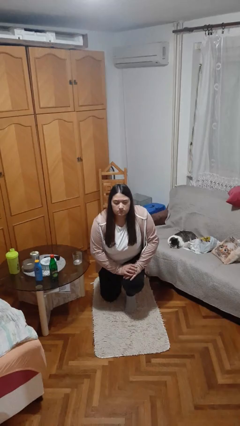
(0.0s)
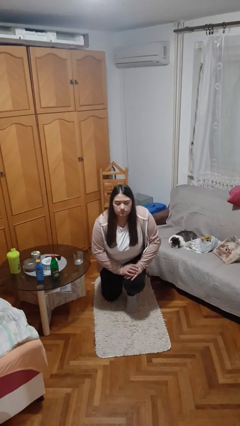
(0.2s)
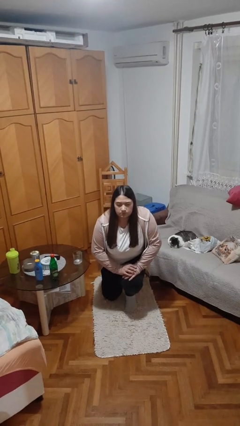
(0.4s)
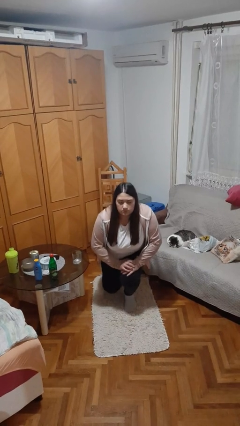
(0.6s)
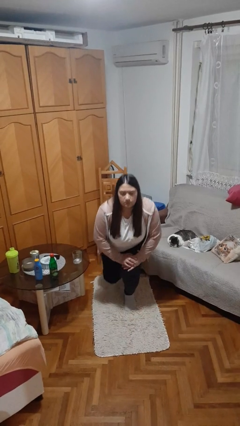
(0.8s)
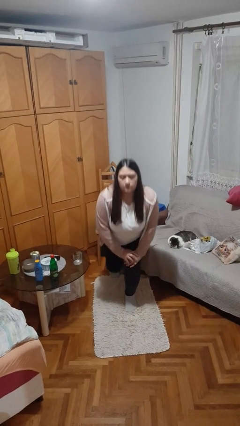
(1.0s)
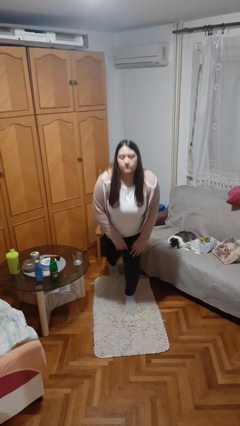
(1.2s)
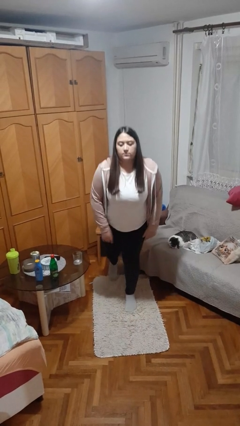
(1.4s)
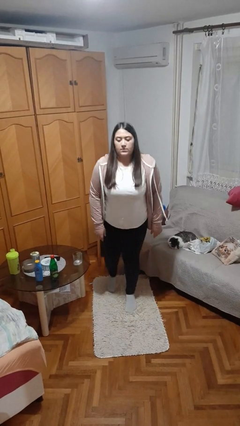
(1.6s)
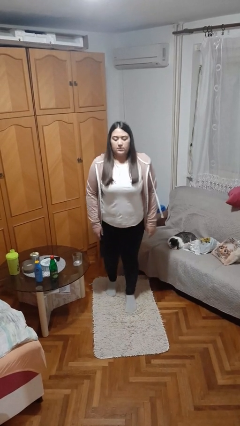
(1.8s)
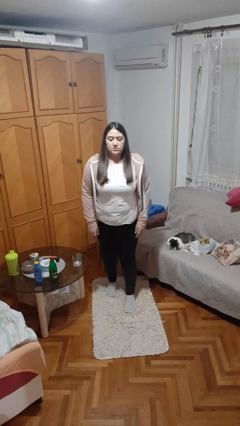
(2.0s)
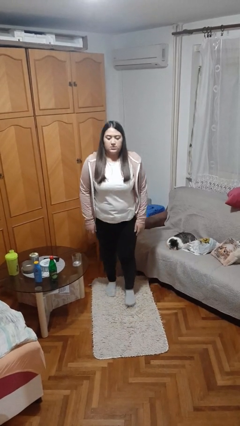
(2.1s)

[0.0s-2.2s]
person stands up from floor

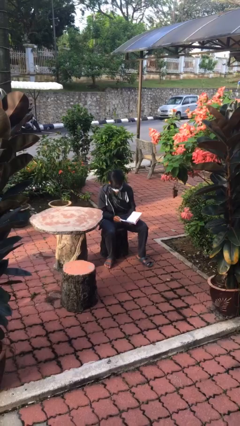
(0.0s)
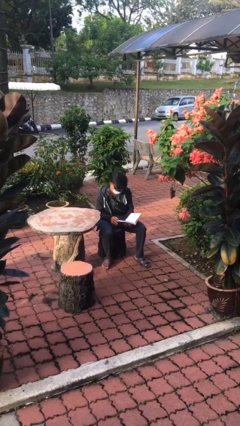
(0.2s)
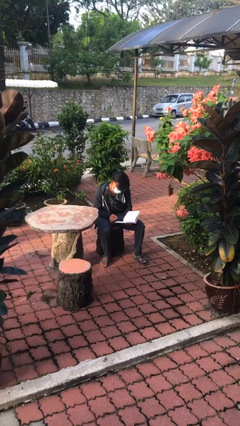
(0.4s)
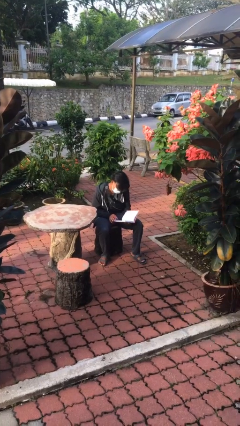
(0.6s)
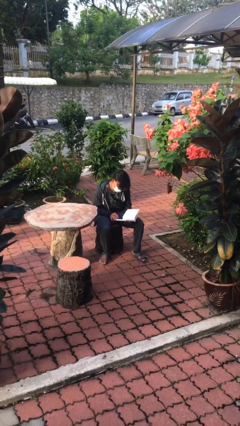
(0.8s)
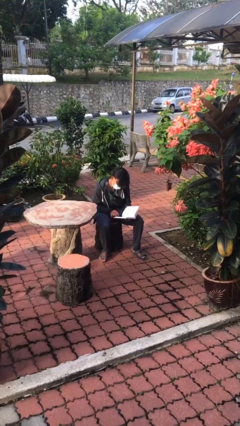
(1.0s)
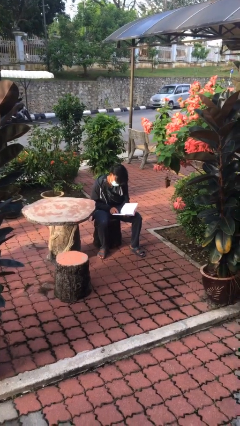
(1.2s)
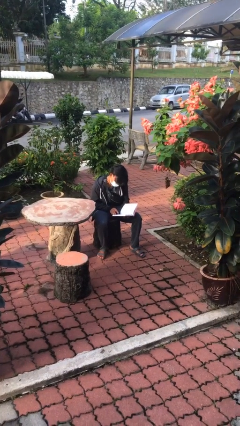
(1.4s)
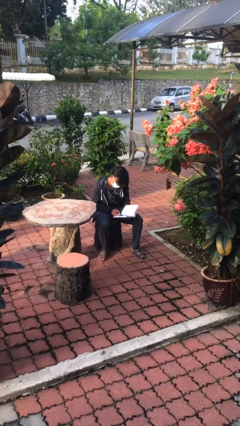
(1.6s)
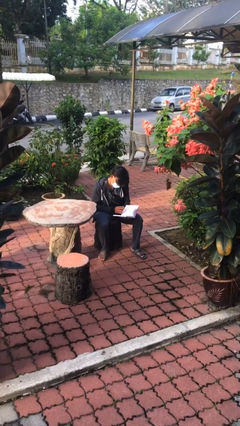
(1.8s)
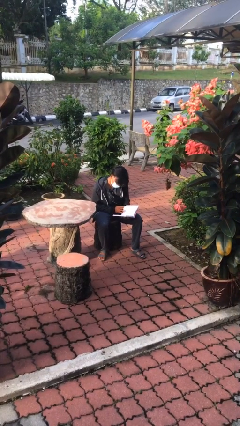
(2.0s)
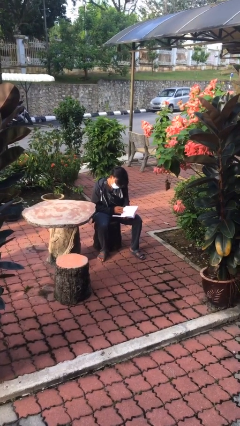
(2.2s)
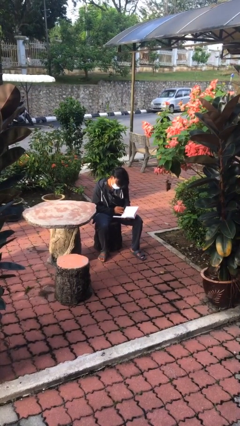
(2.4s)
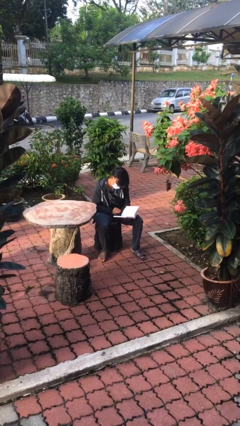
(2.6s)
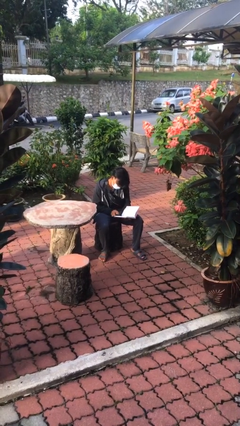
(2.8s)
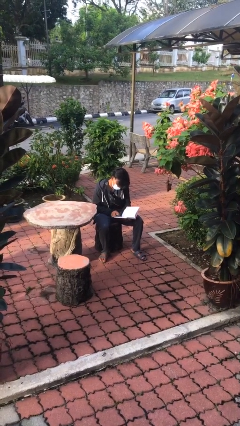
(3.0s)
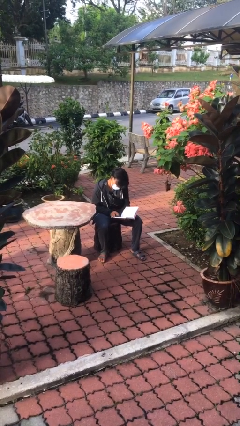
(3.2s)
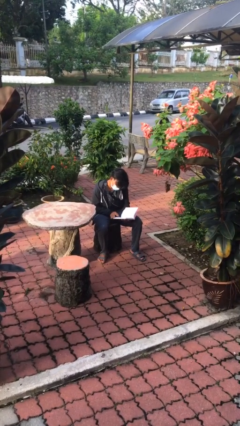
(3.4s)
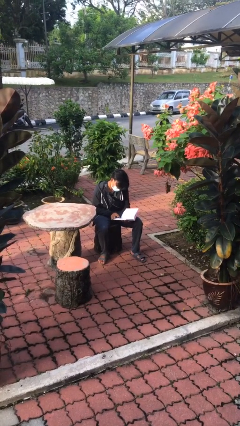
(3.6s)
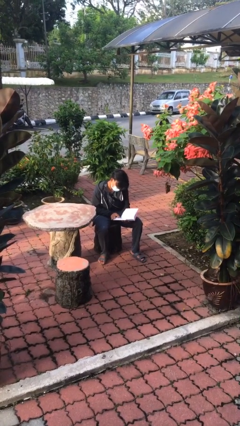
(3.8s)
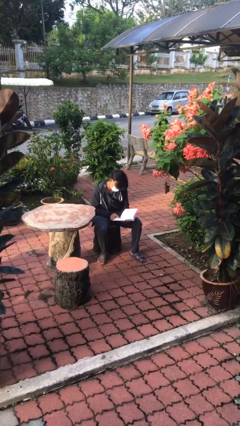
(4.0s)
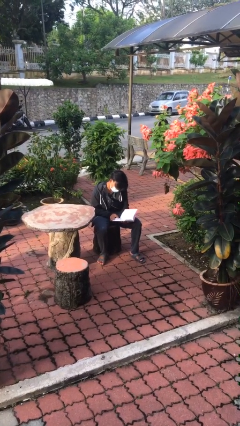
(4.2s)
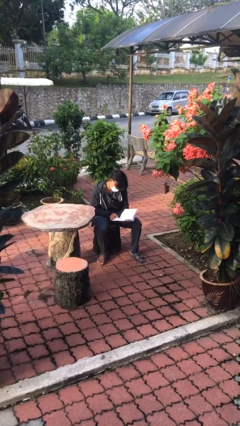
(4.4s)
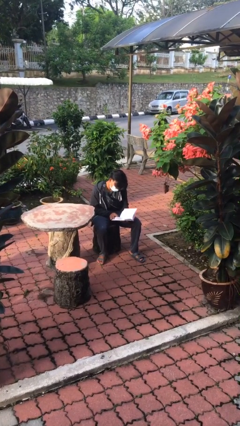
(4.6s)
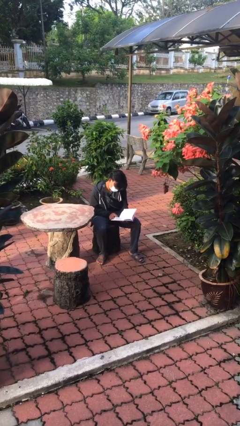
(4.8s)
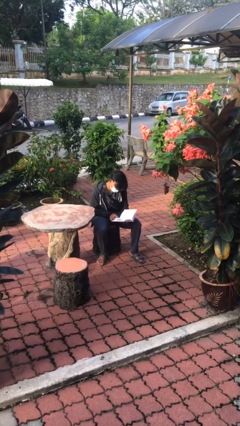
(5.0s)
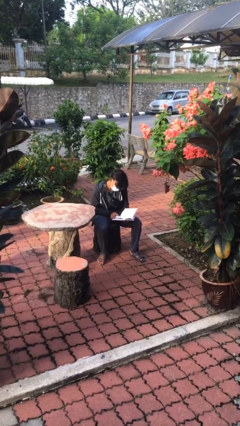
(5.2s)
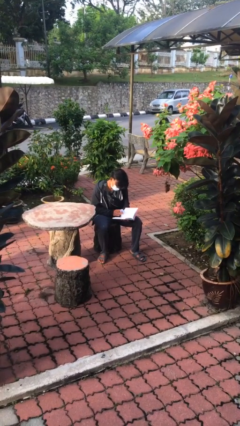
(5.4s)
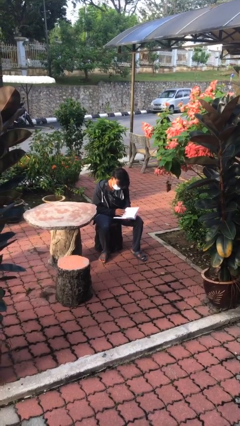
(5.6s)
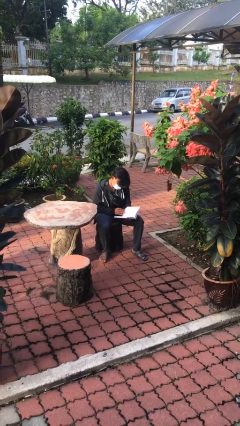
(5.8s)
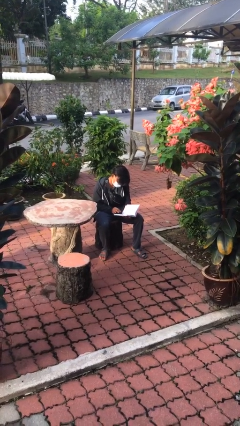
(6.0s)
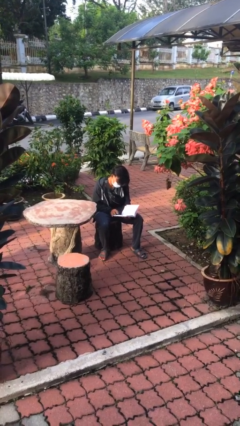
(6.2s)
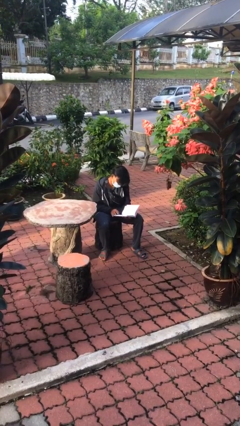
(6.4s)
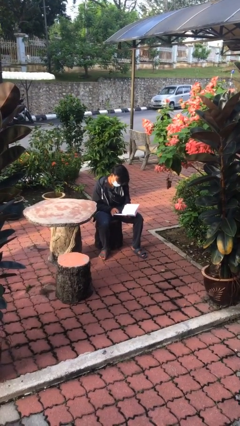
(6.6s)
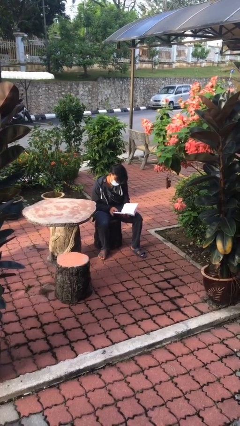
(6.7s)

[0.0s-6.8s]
person reads document

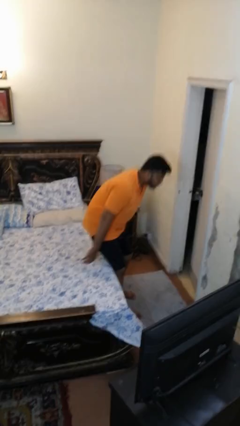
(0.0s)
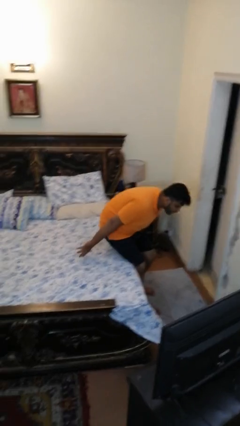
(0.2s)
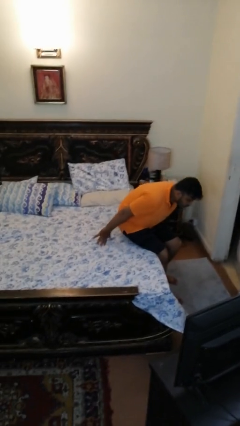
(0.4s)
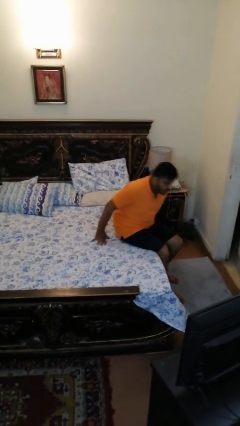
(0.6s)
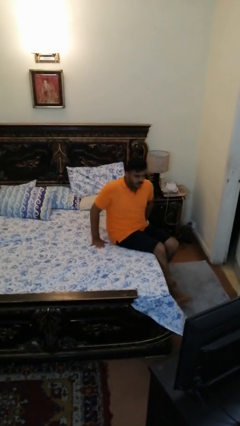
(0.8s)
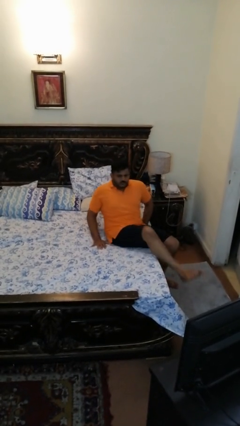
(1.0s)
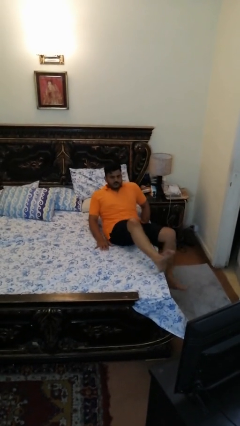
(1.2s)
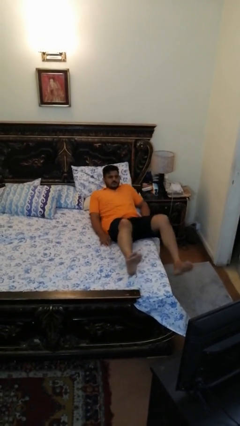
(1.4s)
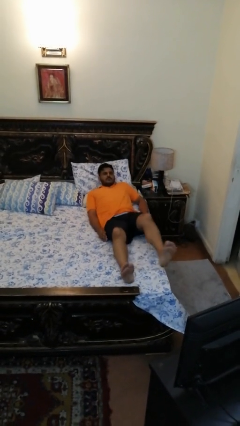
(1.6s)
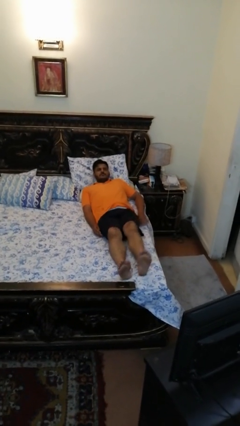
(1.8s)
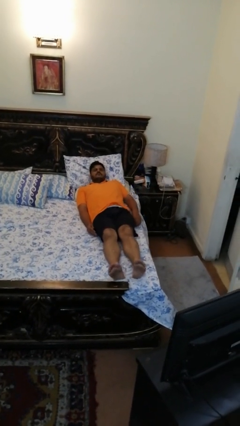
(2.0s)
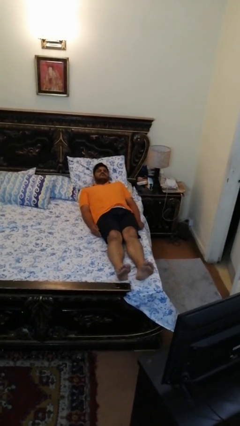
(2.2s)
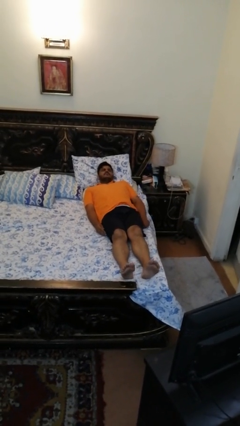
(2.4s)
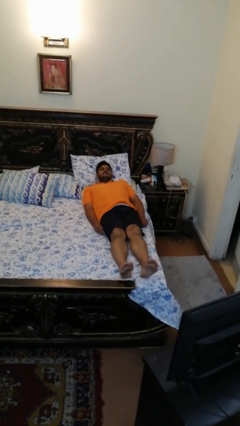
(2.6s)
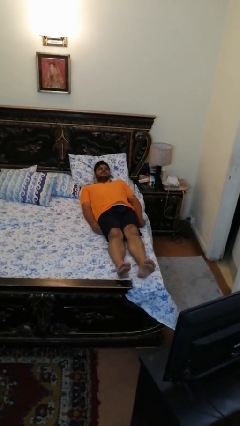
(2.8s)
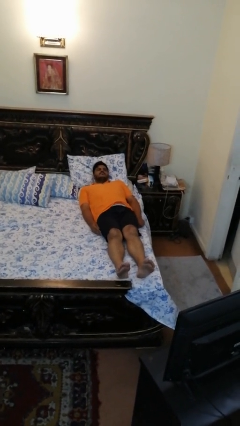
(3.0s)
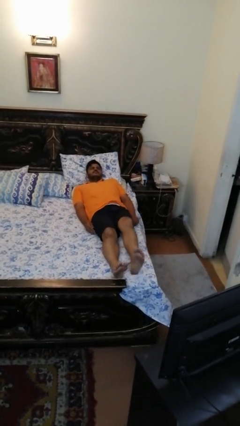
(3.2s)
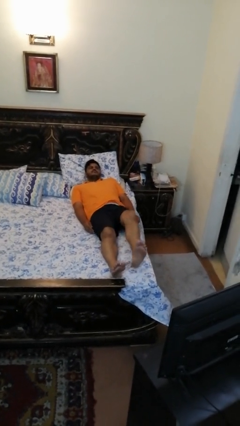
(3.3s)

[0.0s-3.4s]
person lies down on bed

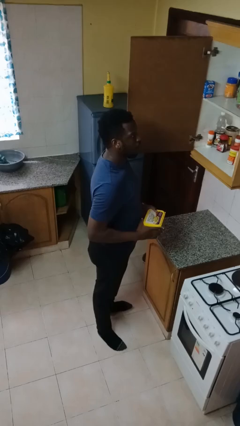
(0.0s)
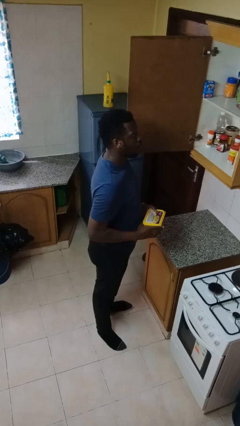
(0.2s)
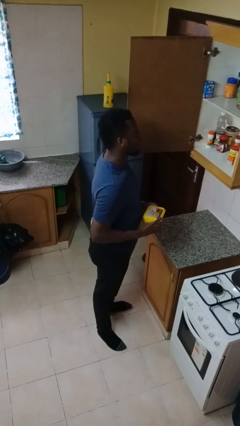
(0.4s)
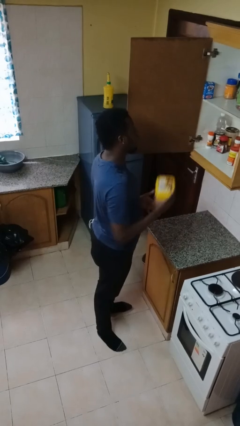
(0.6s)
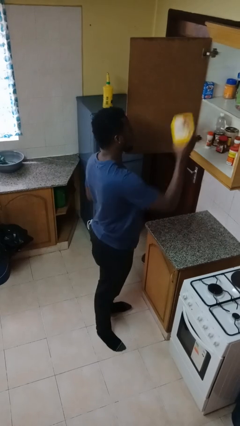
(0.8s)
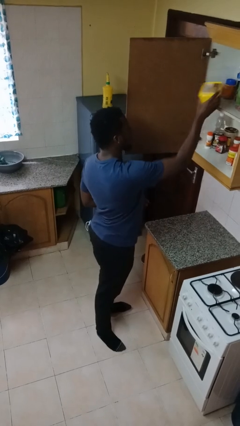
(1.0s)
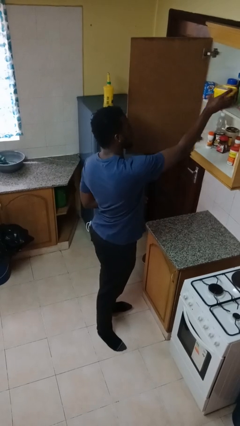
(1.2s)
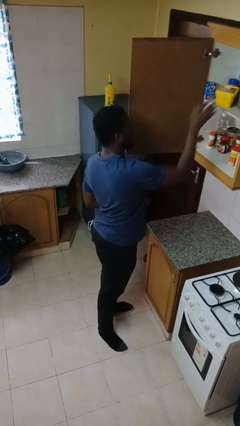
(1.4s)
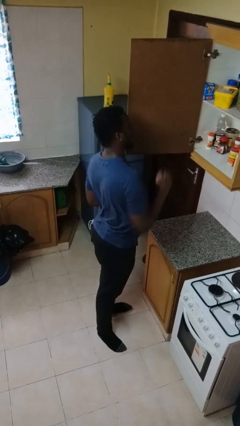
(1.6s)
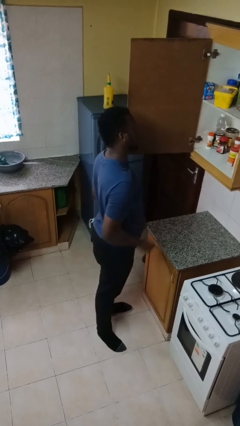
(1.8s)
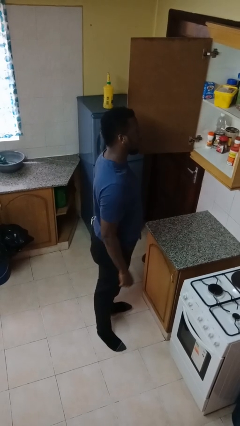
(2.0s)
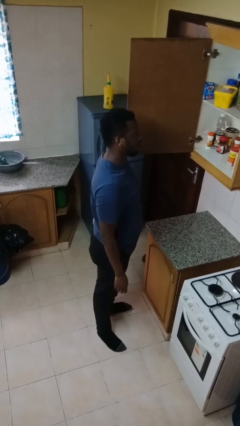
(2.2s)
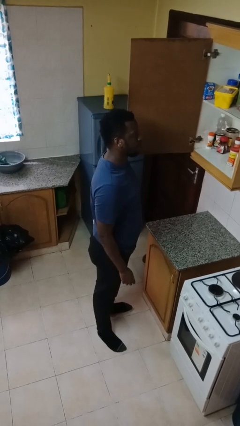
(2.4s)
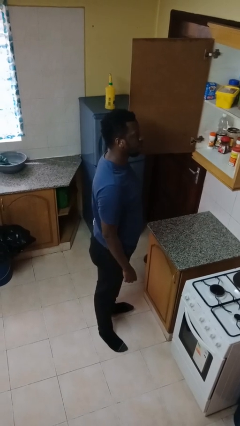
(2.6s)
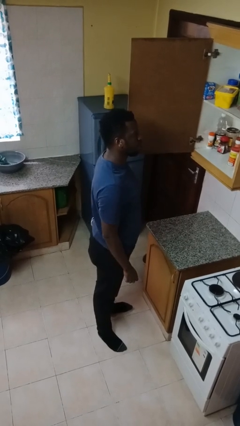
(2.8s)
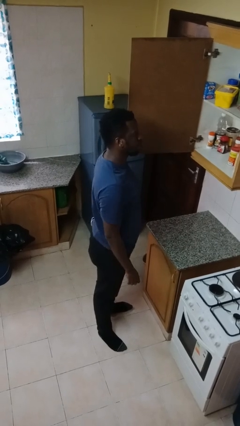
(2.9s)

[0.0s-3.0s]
person puts down object on shelf

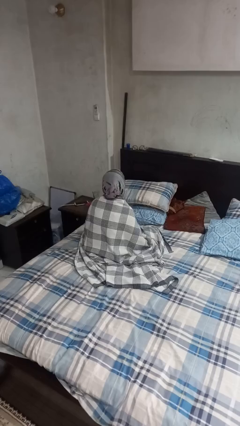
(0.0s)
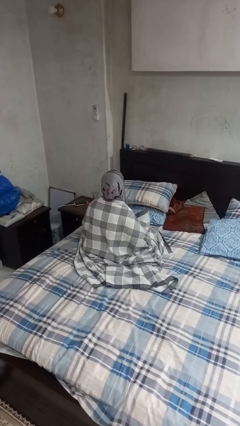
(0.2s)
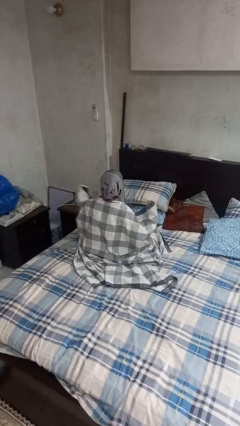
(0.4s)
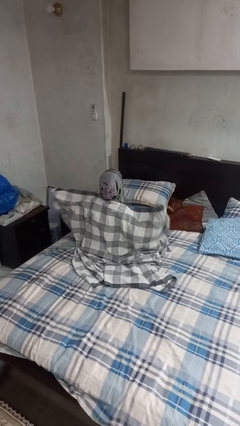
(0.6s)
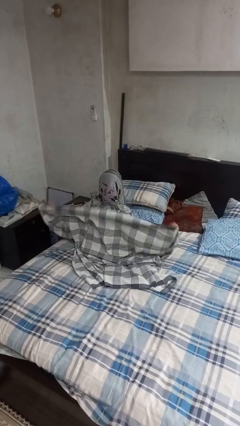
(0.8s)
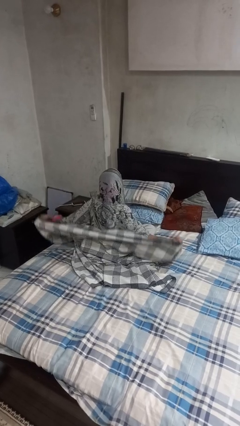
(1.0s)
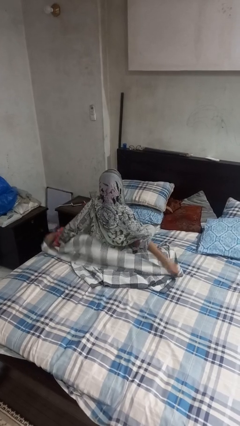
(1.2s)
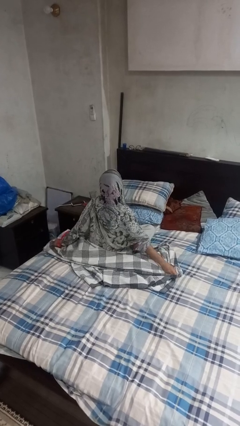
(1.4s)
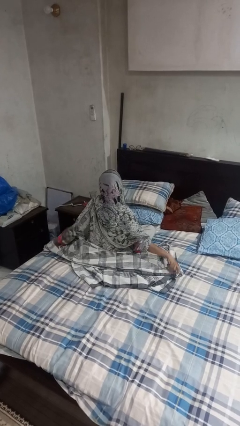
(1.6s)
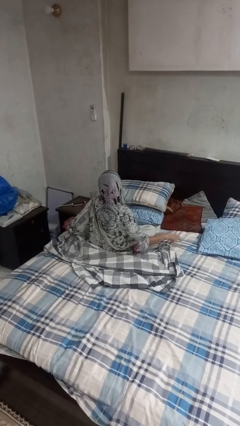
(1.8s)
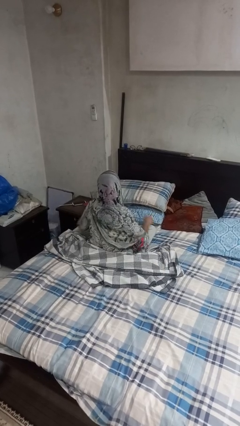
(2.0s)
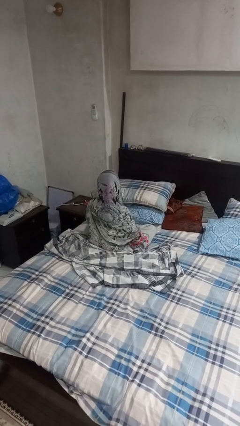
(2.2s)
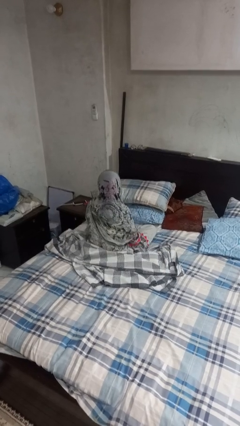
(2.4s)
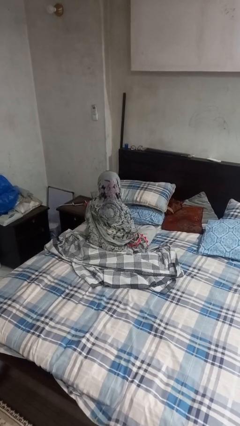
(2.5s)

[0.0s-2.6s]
person uncovers with blanket
